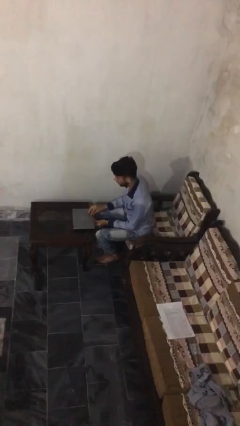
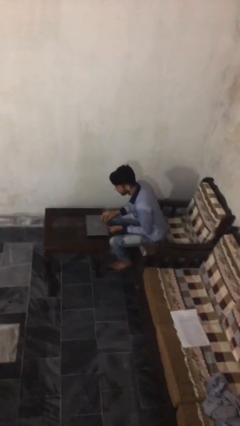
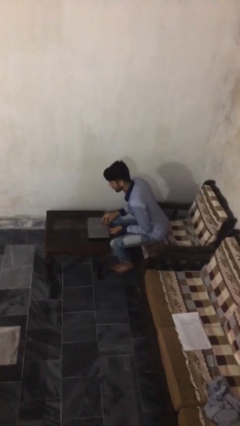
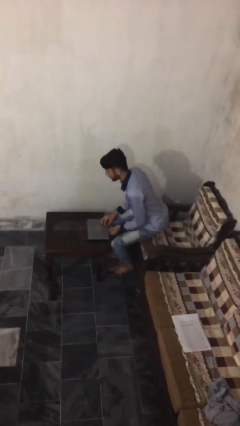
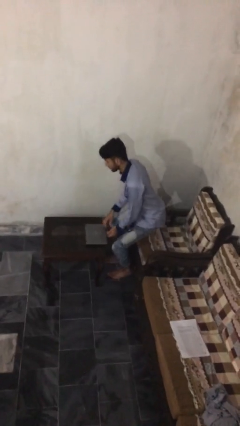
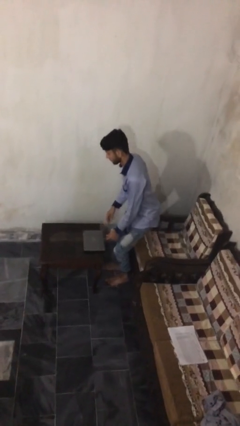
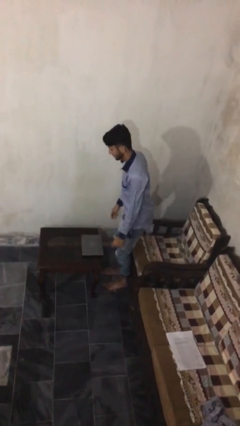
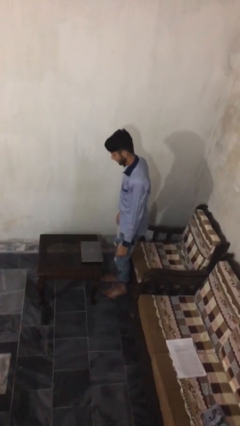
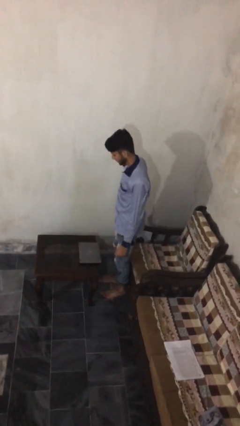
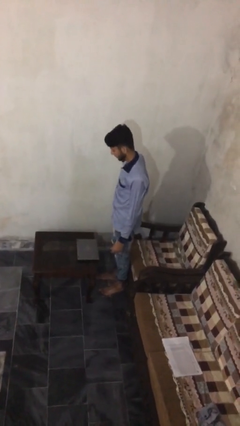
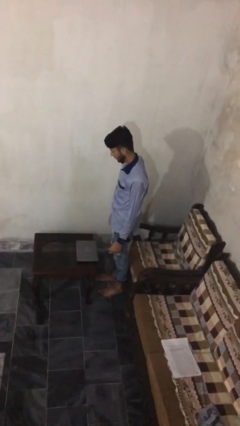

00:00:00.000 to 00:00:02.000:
person stands up

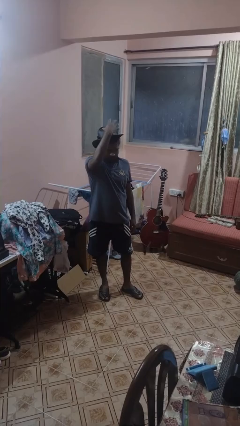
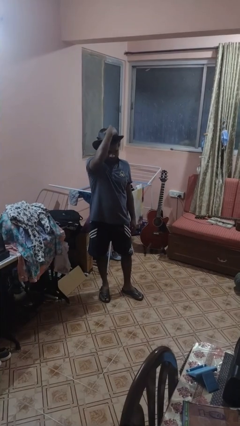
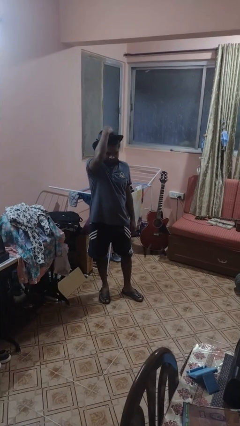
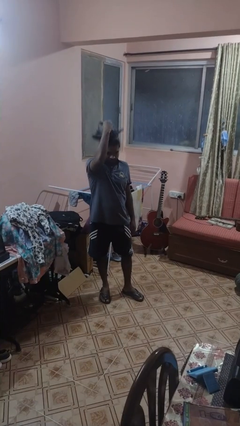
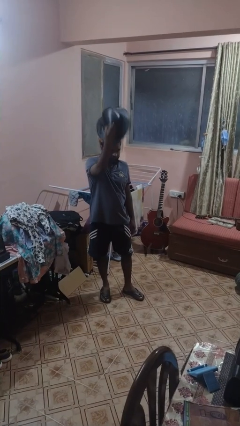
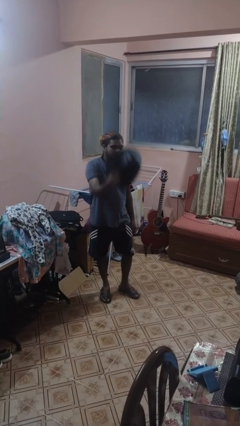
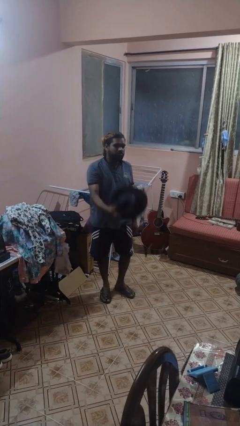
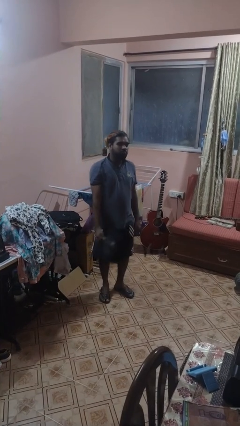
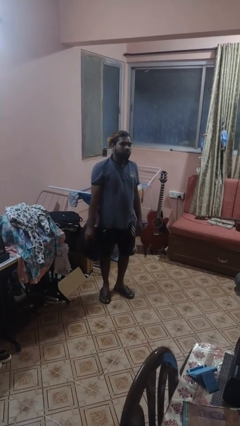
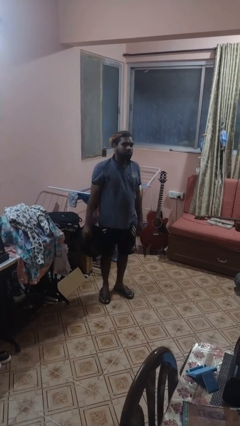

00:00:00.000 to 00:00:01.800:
person takes off hat

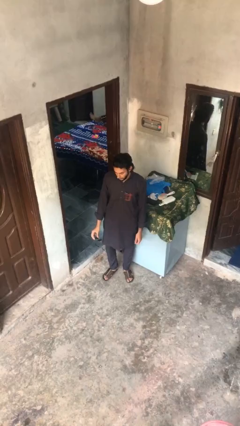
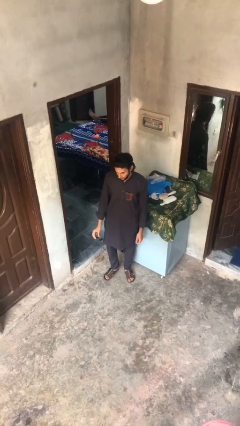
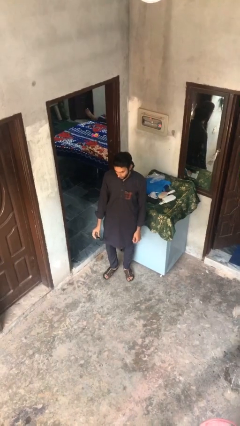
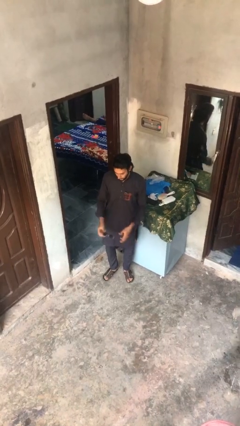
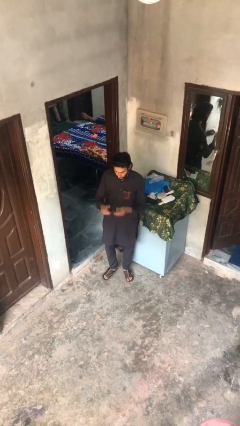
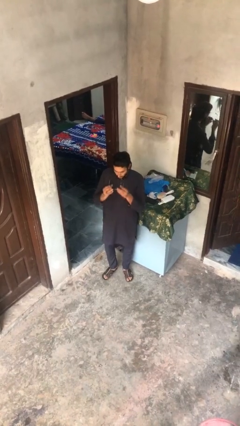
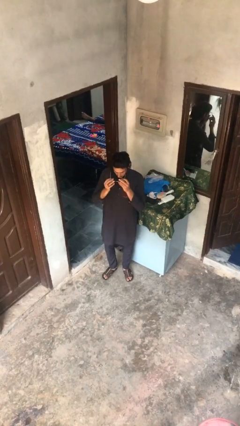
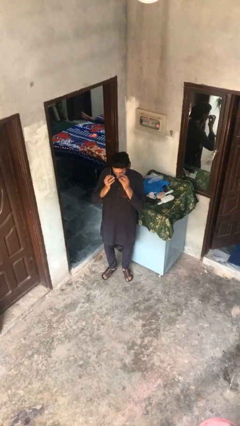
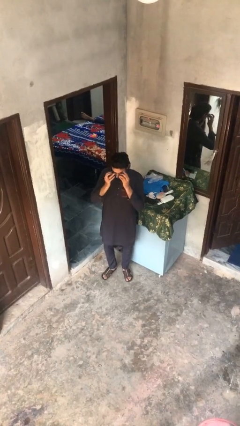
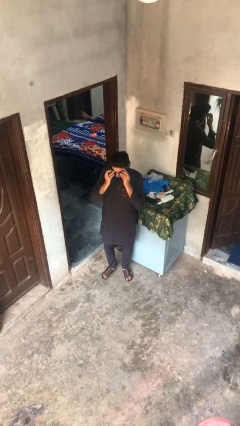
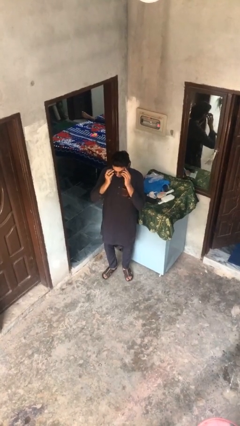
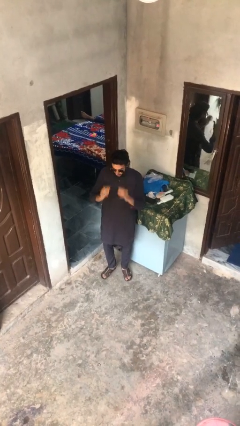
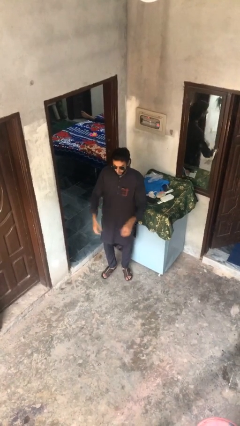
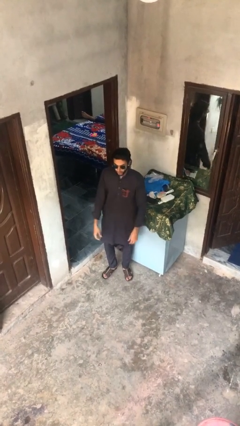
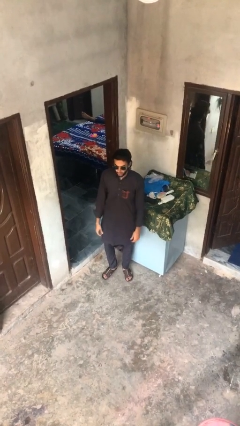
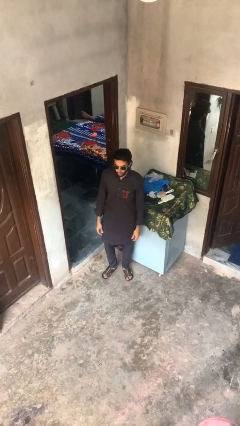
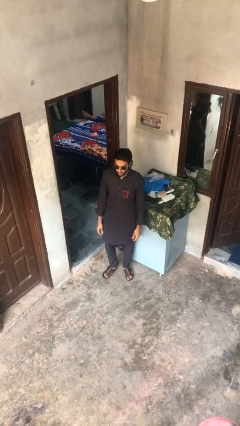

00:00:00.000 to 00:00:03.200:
person puts on sunglasses

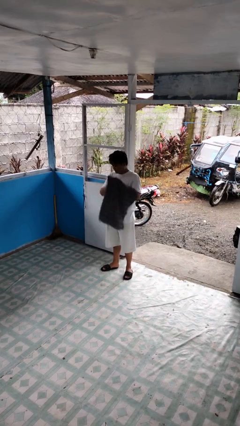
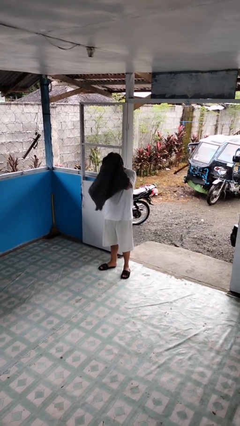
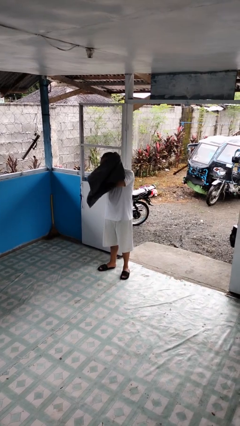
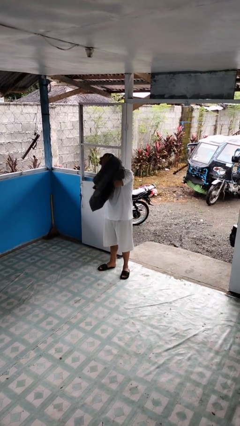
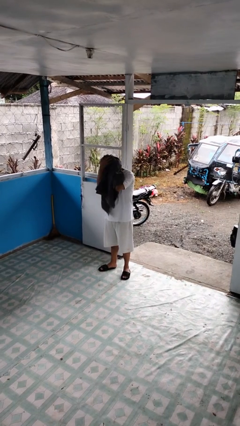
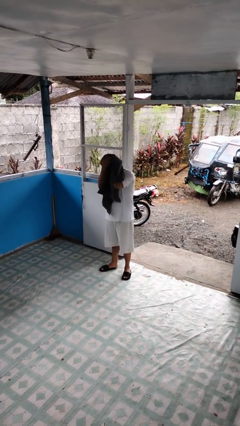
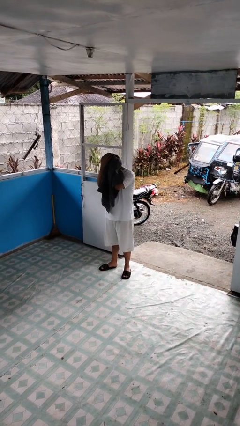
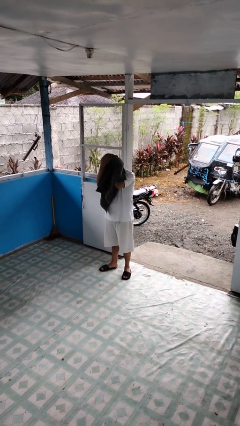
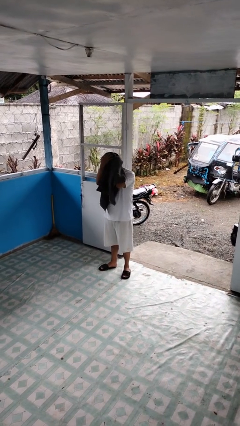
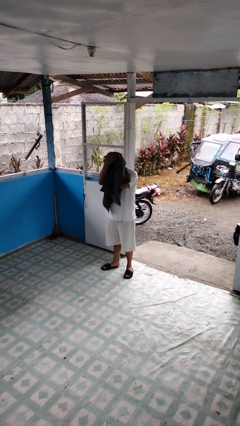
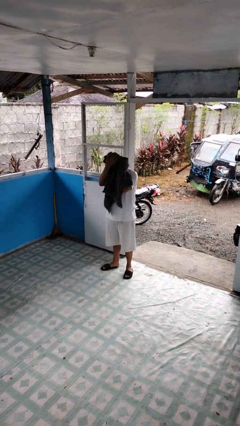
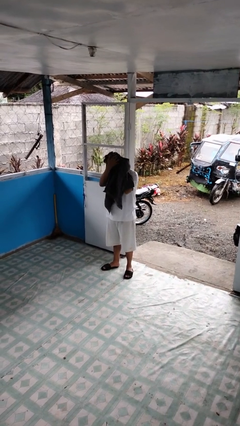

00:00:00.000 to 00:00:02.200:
person dries hair with towel

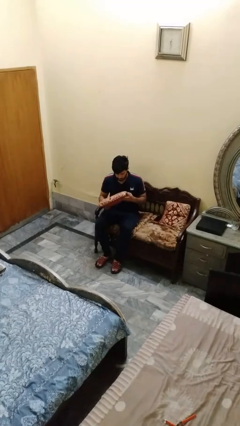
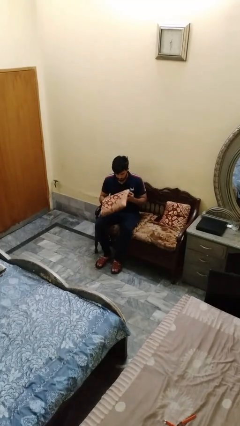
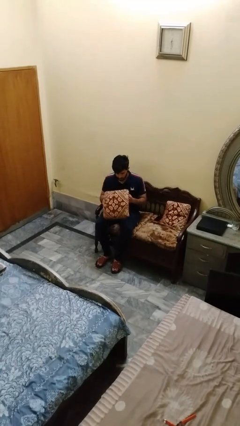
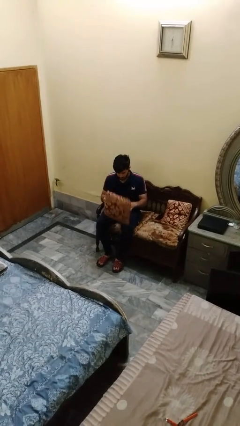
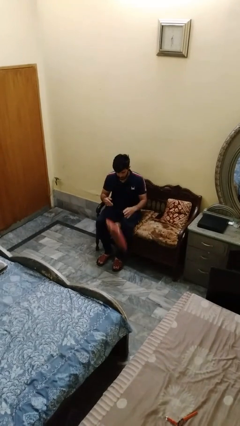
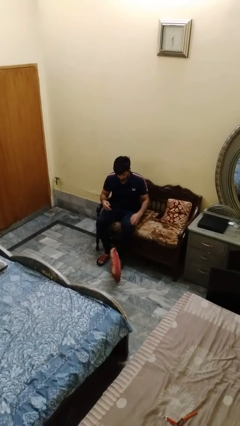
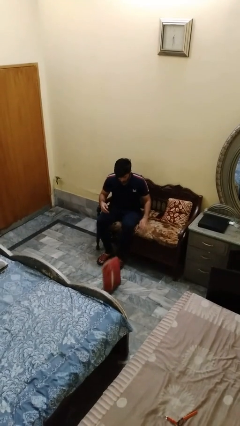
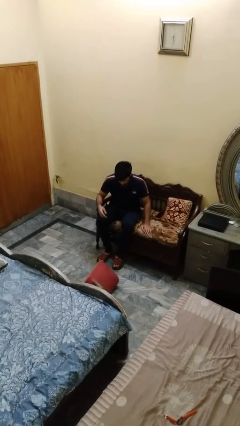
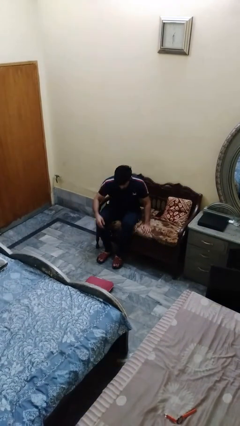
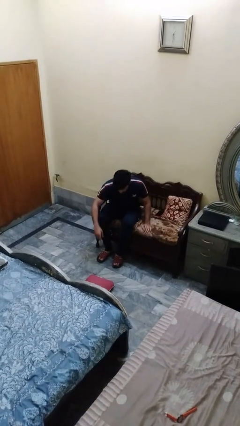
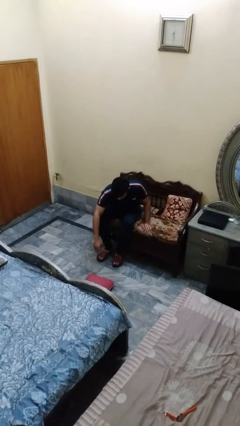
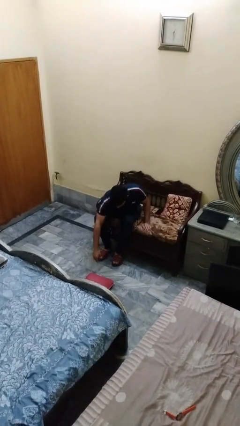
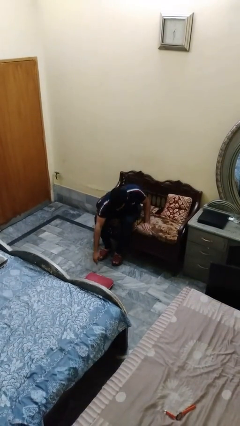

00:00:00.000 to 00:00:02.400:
person drops object

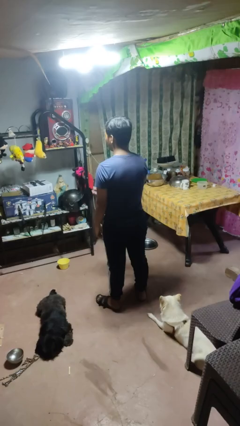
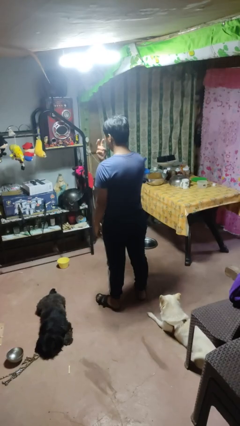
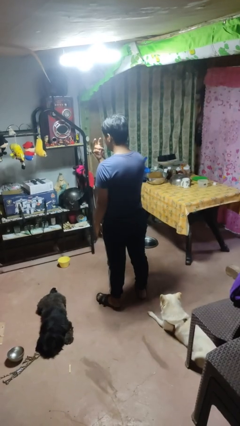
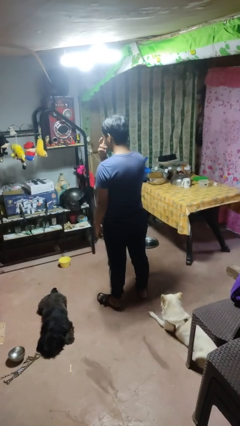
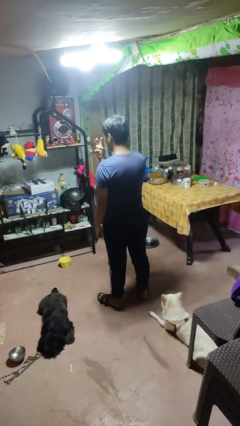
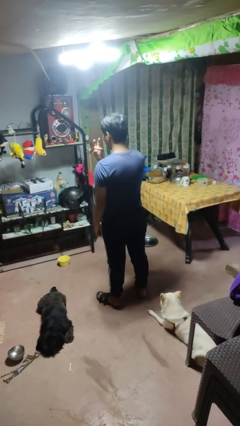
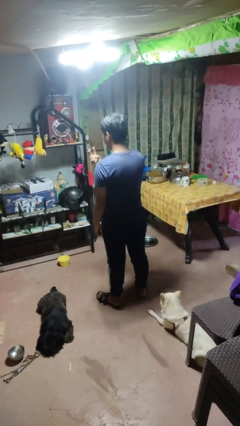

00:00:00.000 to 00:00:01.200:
person gestures watch closely

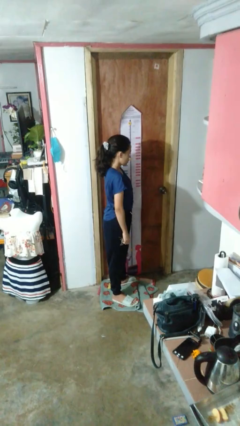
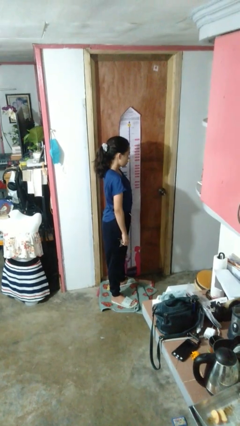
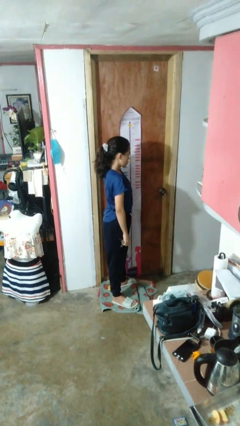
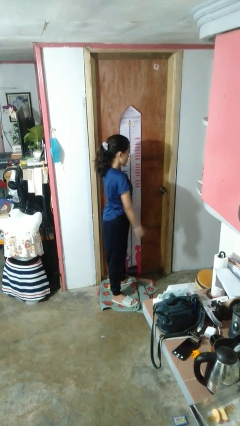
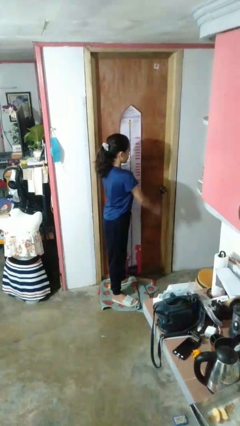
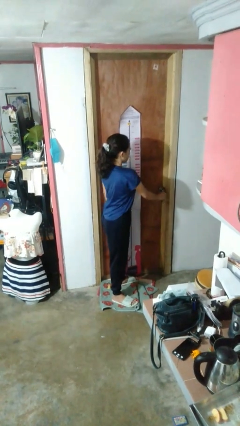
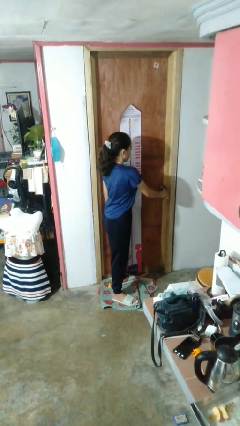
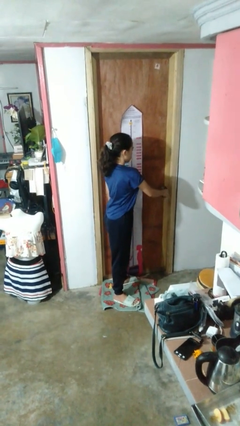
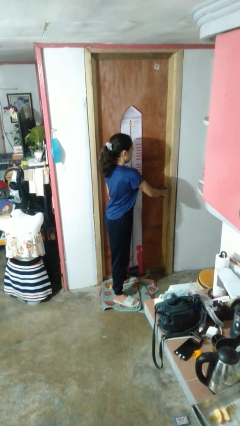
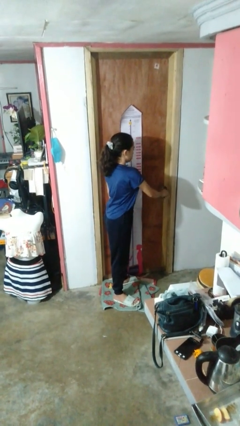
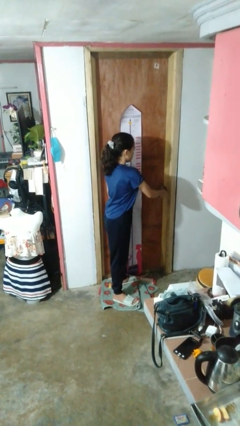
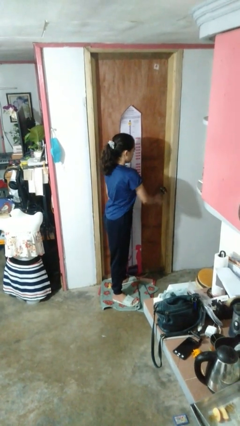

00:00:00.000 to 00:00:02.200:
person unlocks door with keys

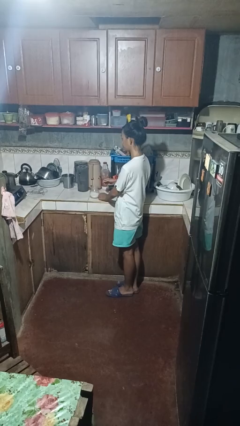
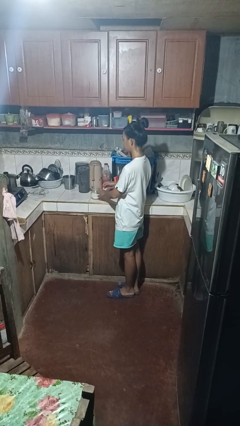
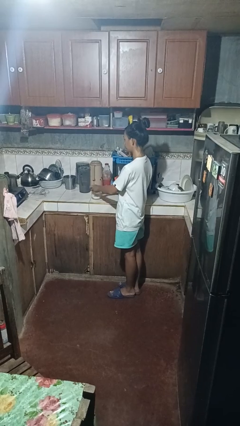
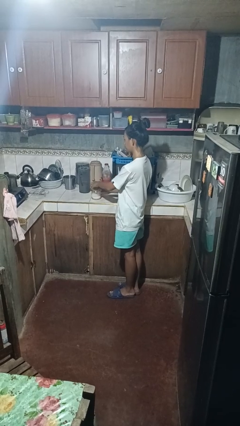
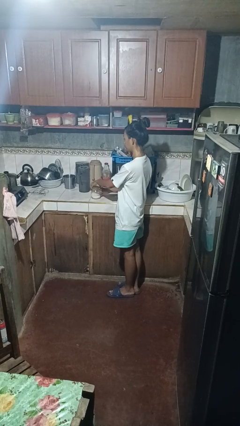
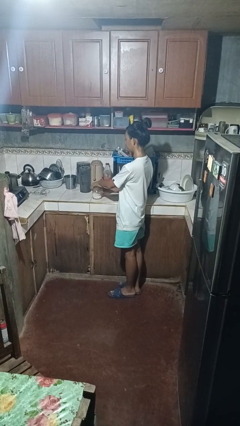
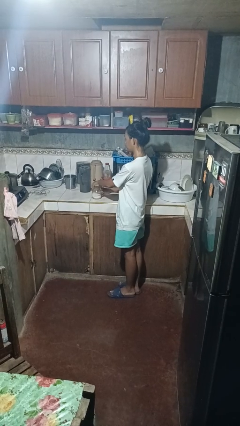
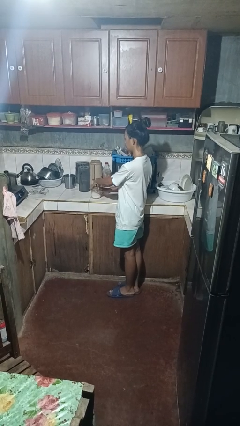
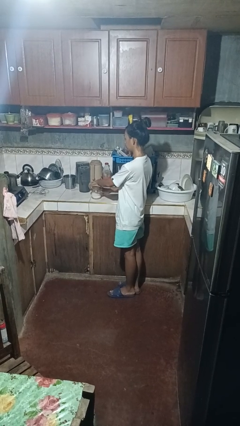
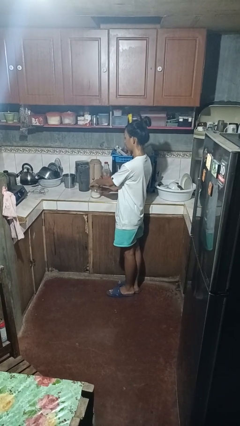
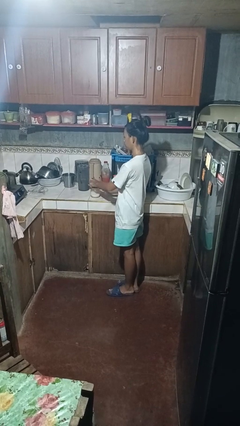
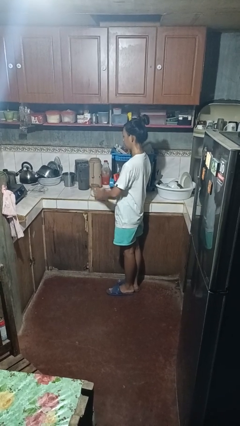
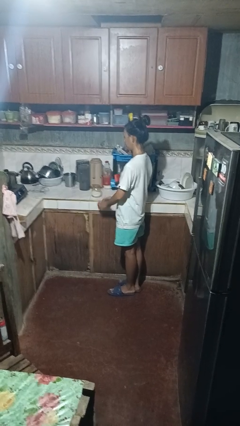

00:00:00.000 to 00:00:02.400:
person screws lid to bottle
